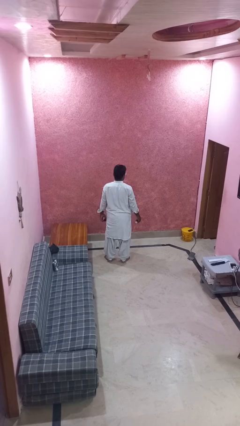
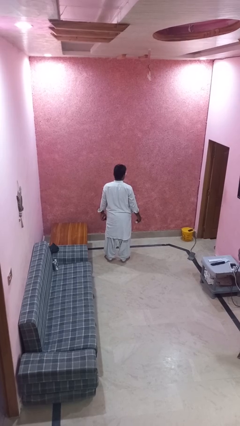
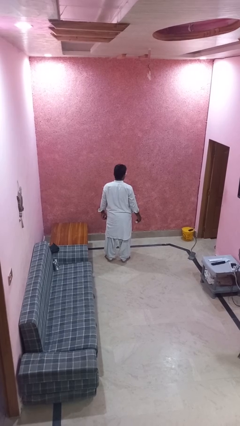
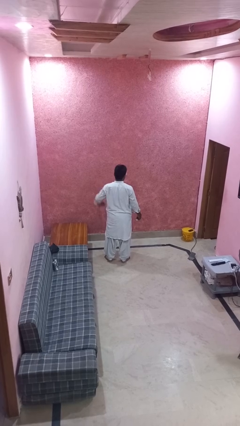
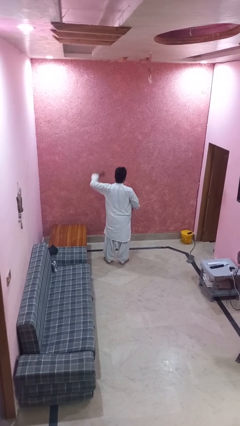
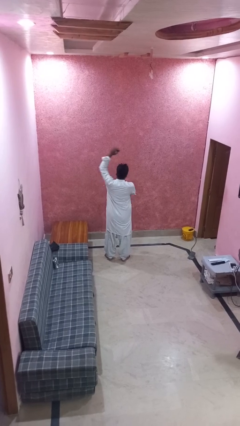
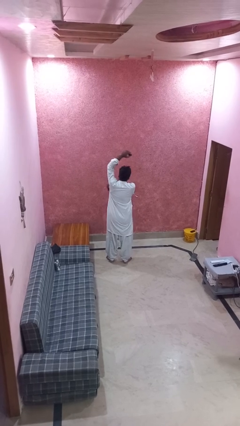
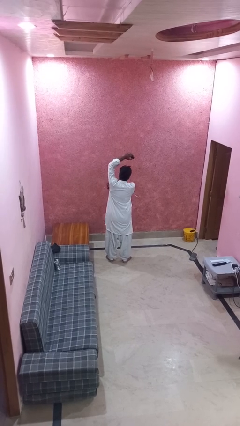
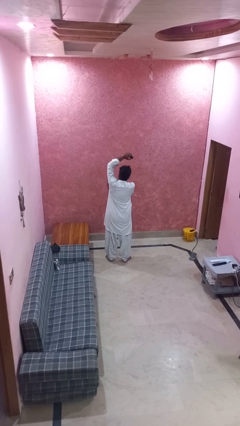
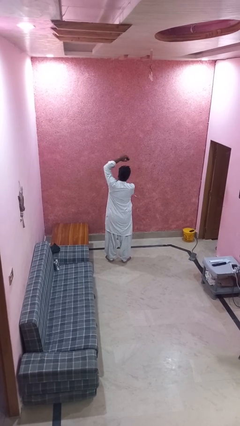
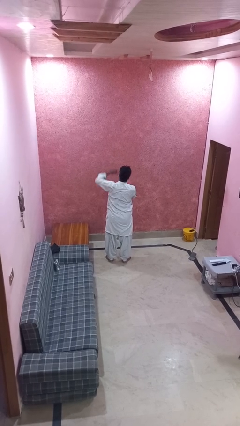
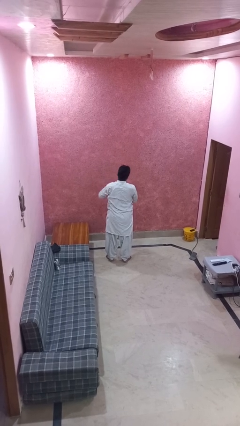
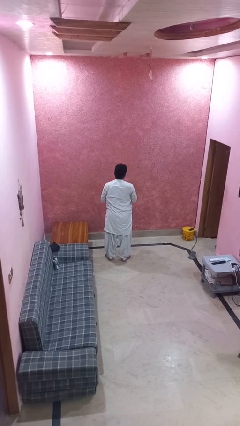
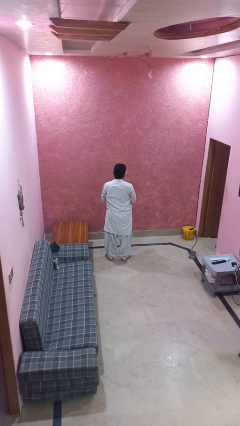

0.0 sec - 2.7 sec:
person applies deodorant

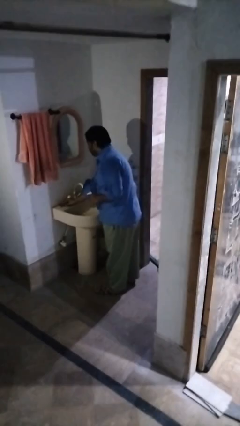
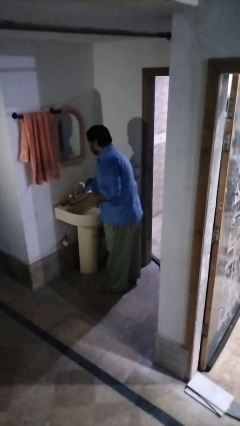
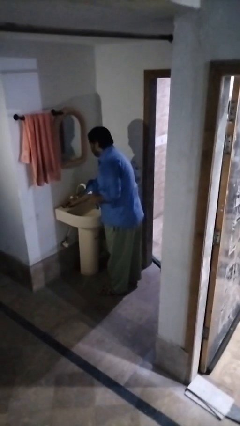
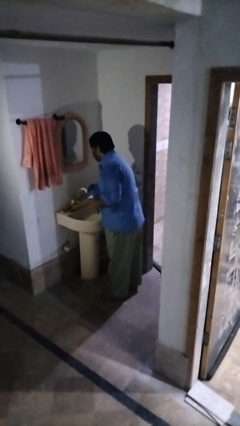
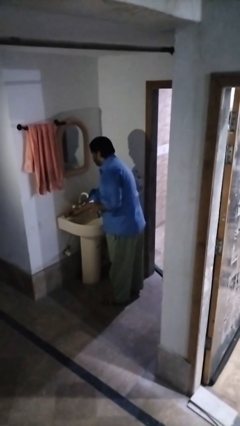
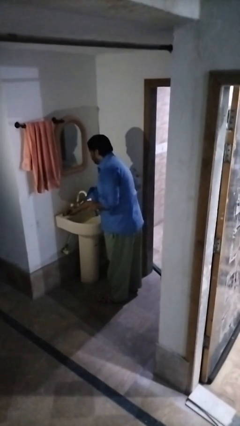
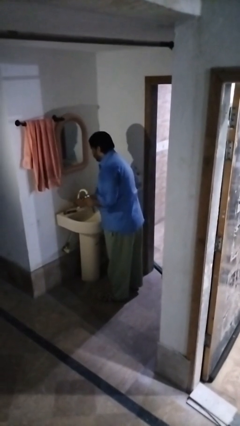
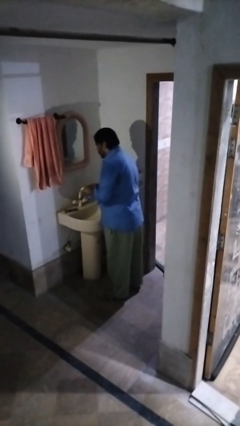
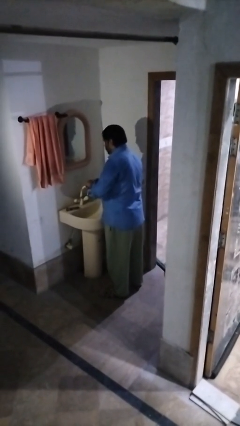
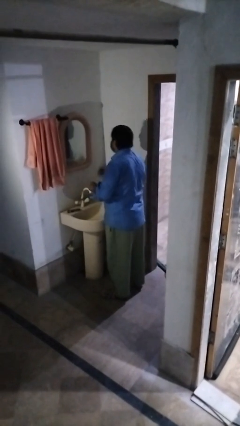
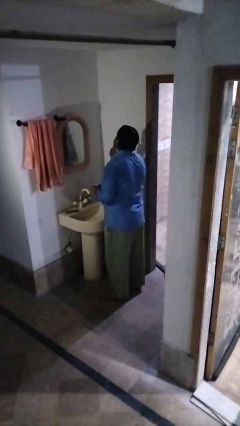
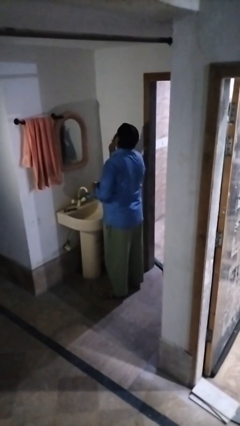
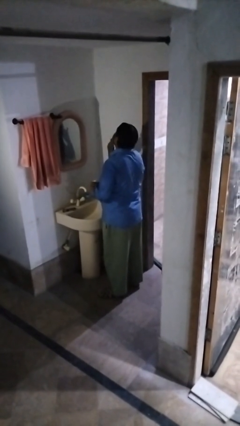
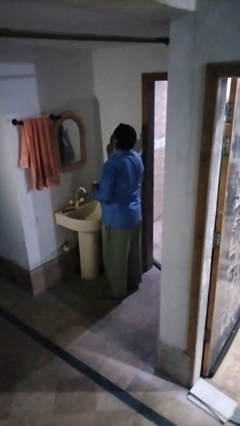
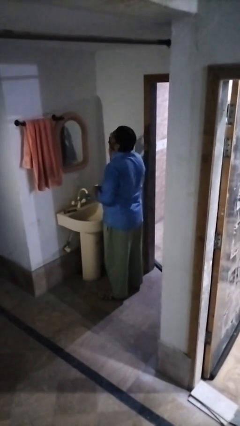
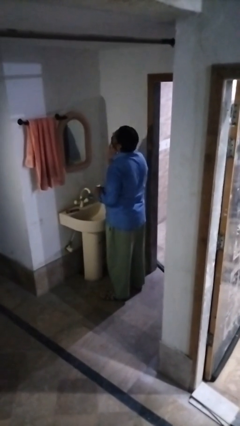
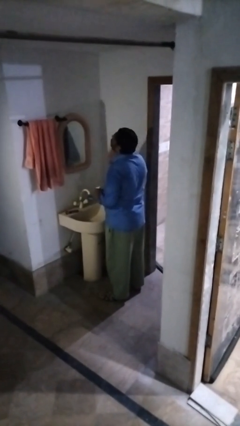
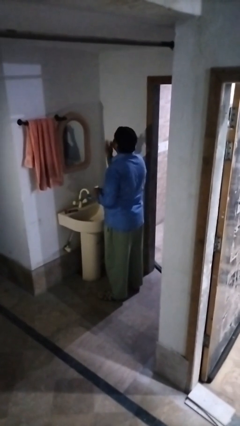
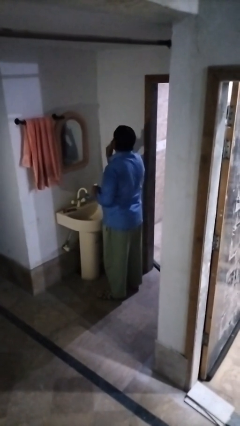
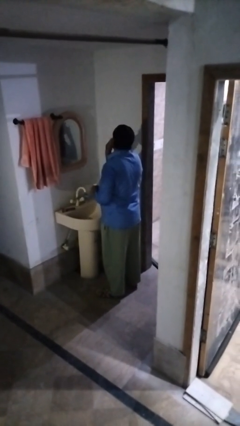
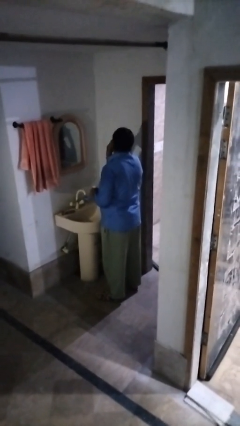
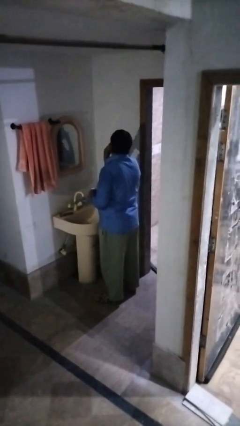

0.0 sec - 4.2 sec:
person applies shaving cream

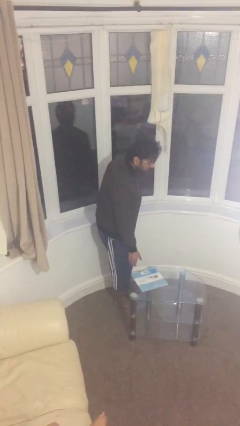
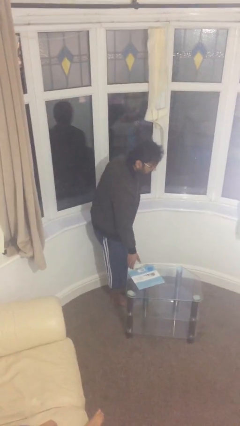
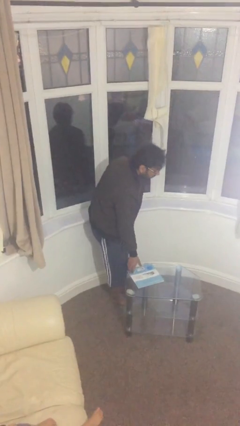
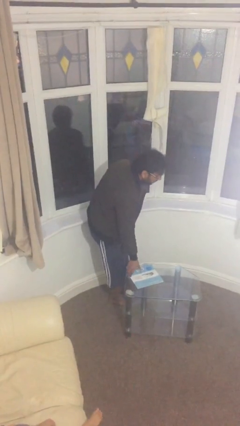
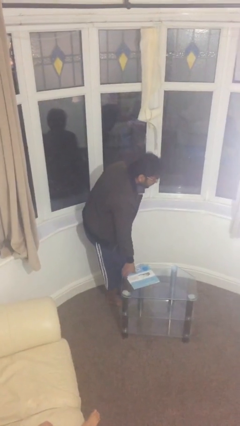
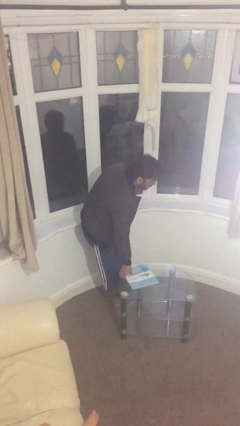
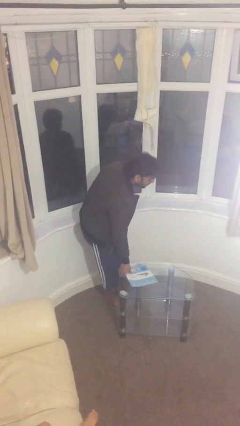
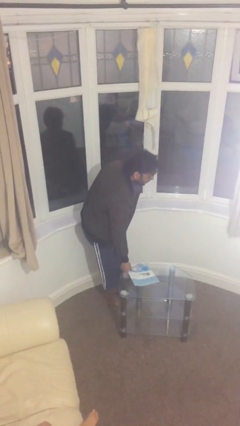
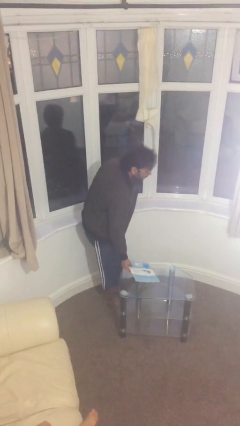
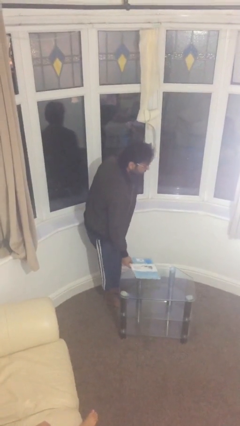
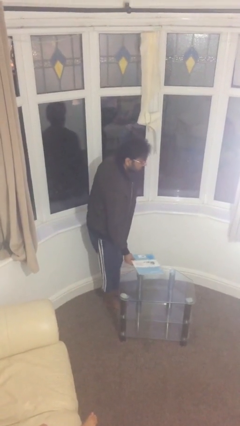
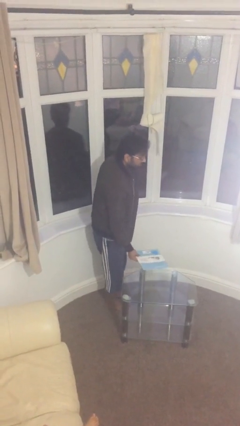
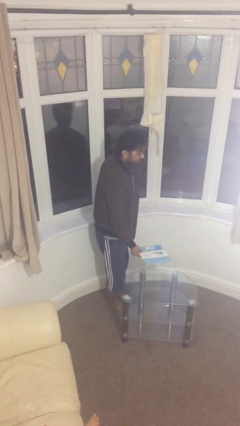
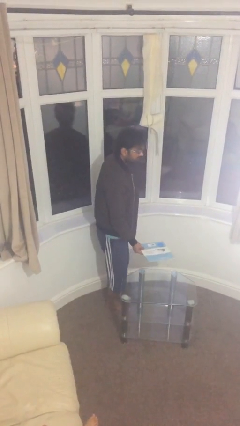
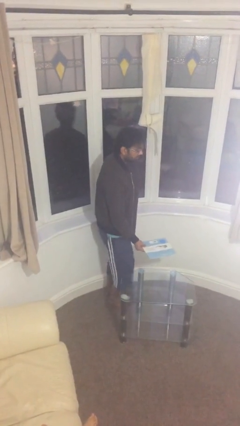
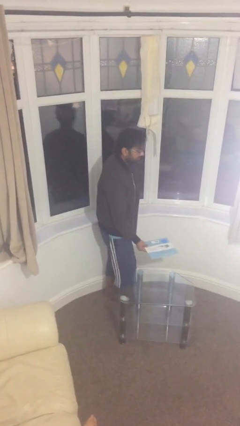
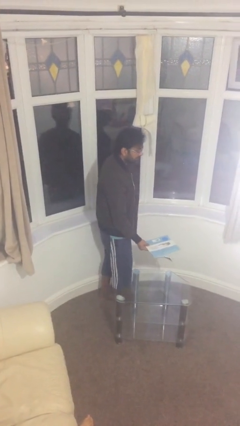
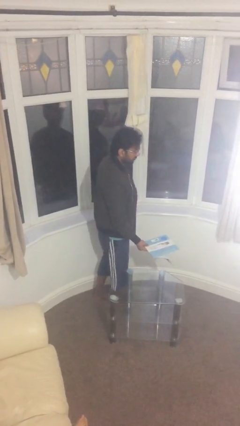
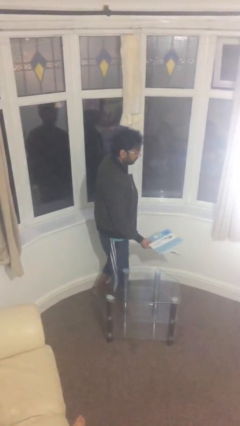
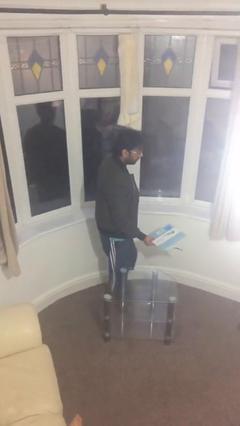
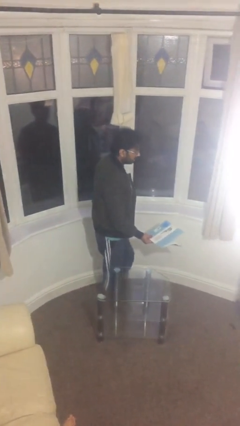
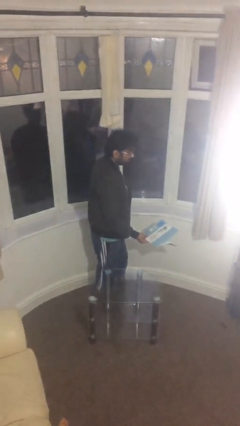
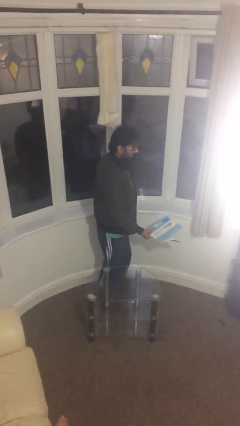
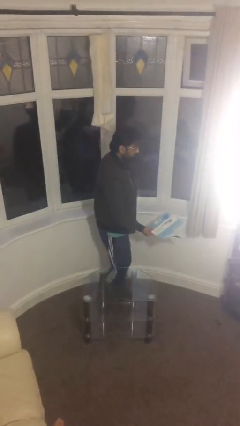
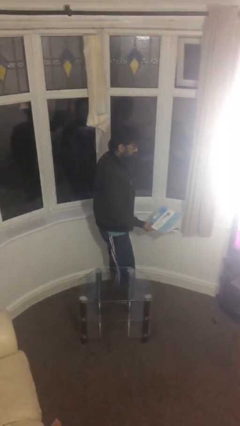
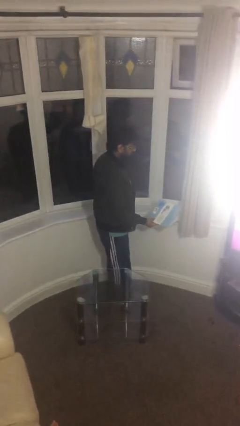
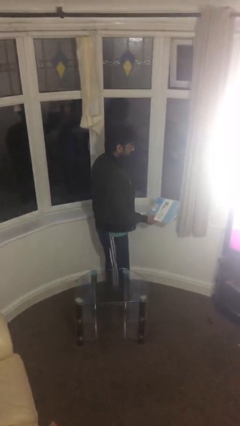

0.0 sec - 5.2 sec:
person picks up object from table

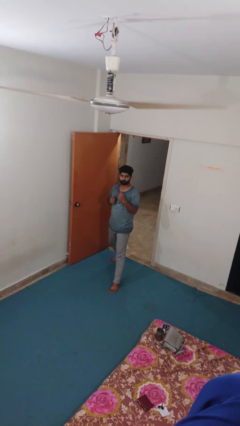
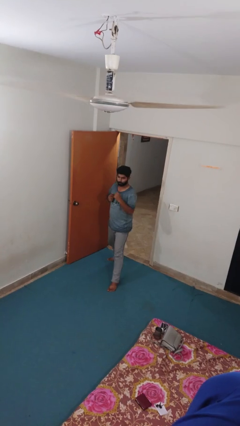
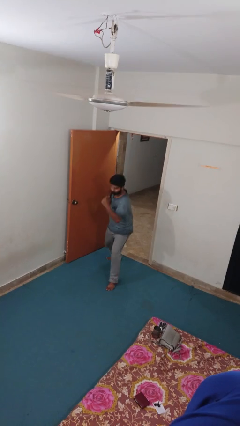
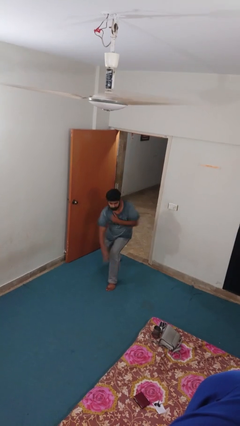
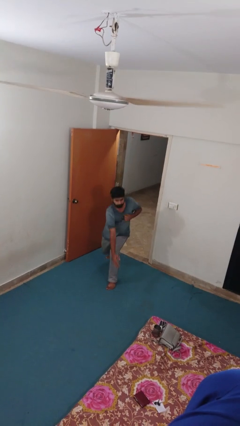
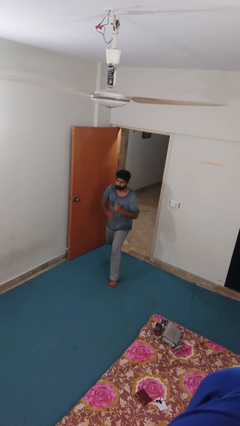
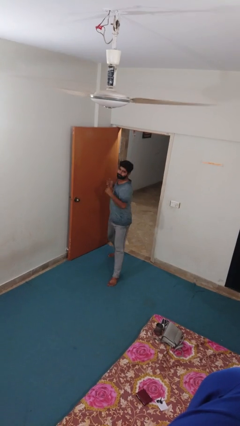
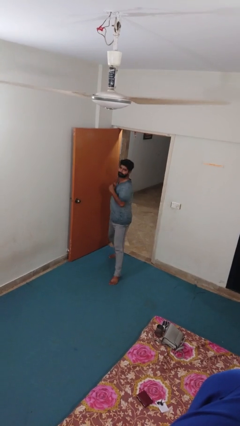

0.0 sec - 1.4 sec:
person karate chop

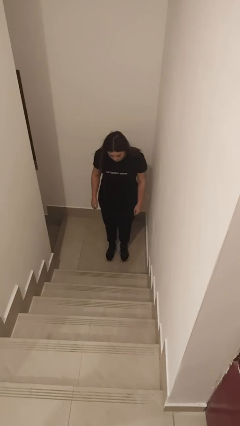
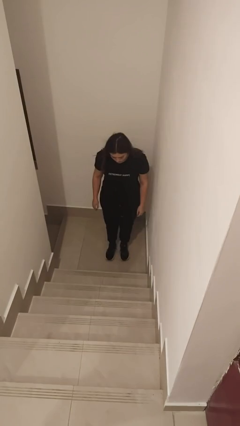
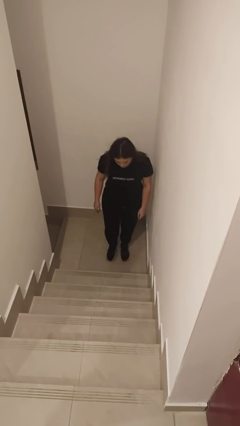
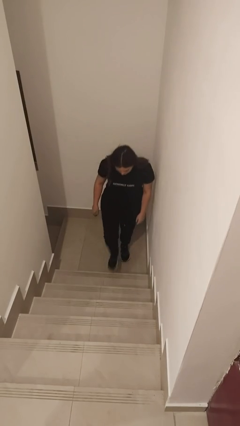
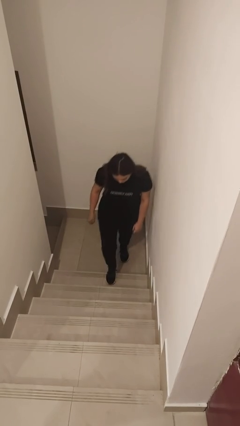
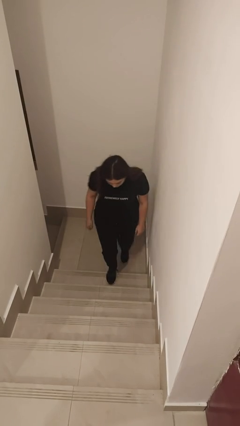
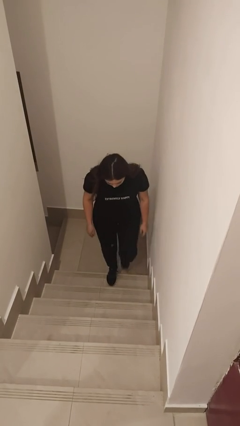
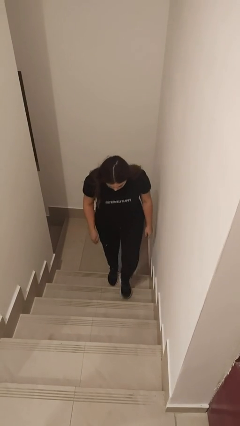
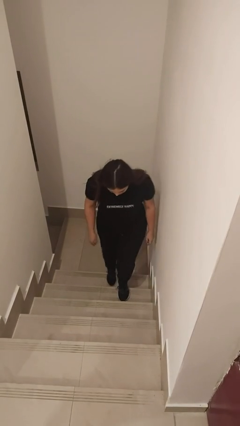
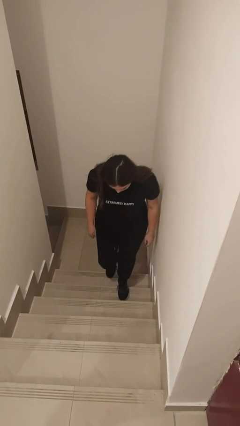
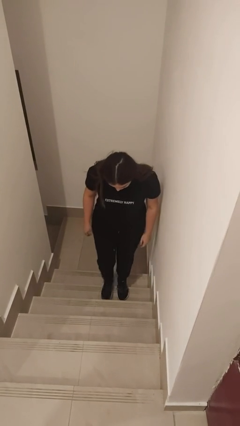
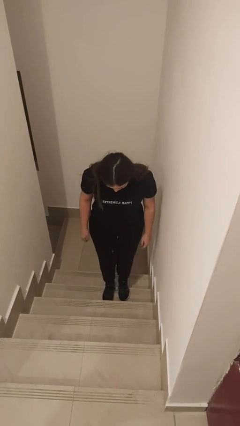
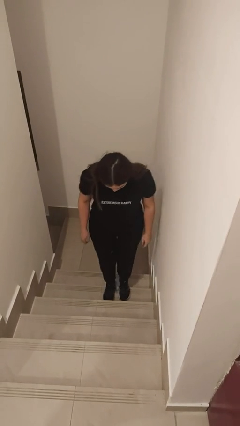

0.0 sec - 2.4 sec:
person climbs up stairs

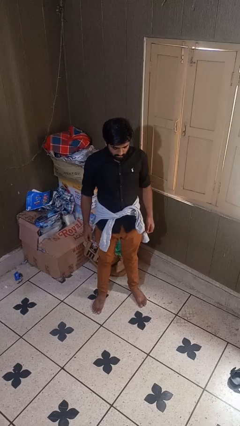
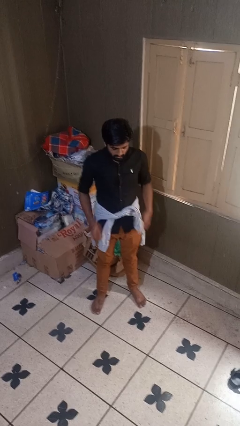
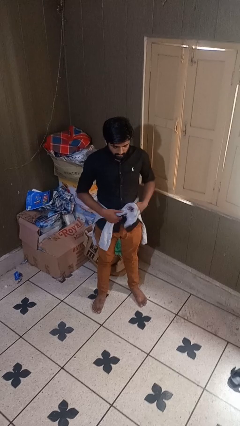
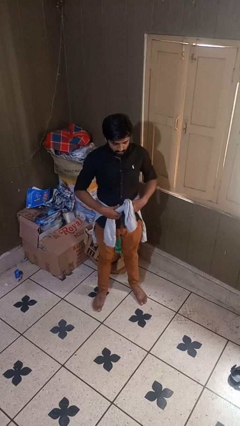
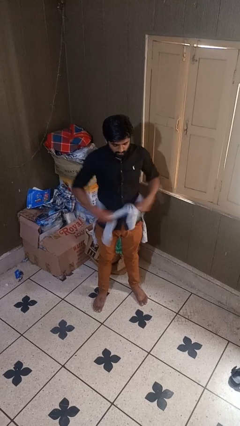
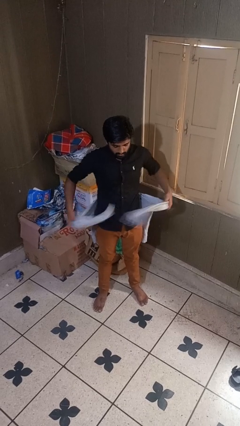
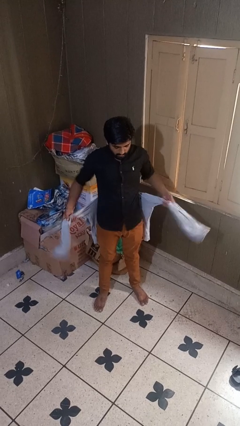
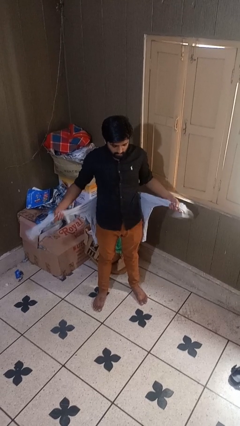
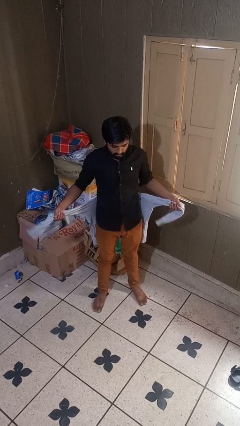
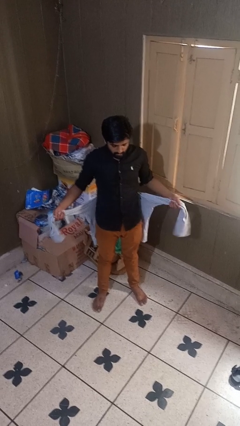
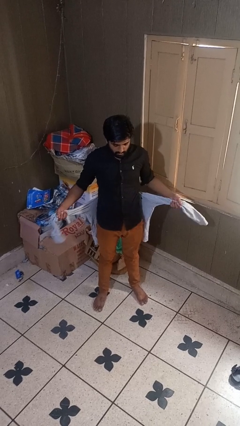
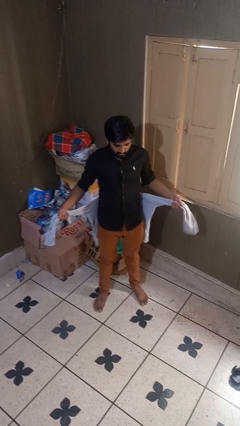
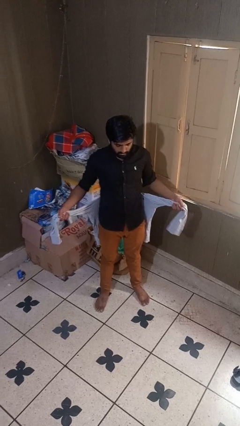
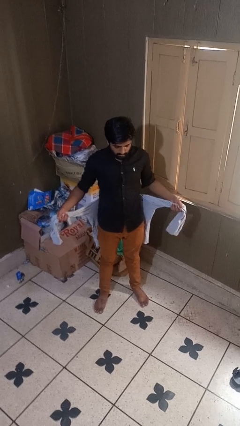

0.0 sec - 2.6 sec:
person unties jacket around waist
